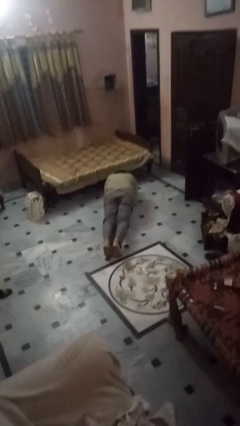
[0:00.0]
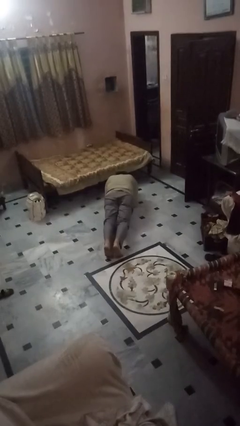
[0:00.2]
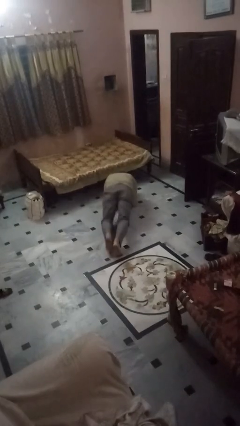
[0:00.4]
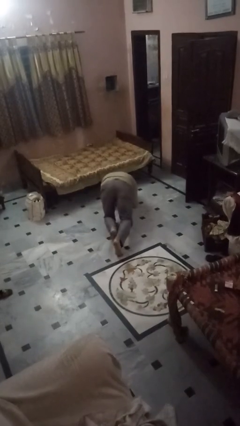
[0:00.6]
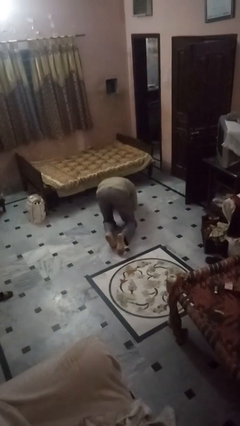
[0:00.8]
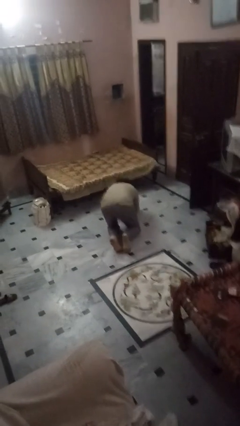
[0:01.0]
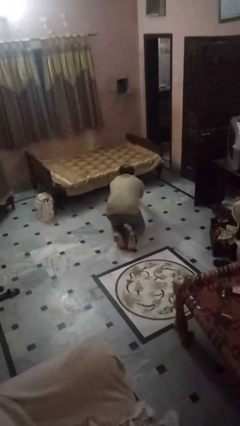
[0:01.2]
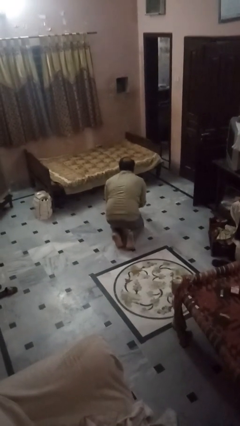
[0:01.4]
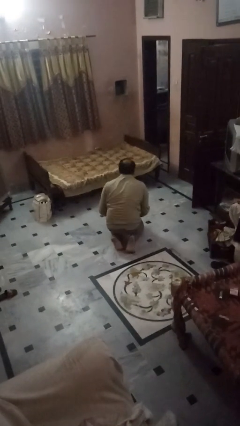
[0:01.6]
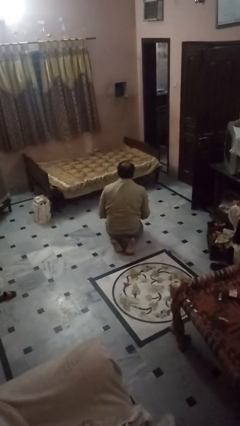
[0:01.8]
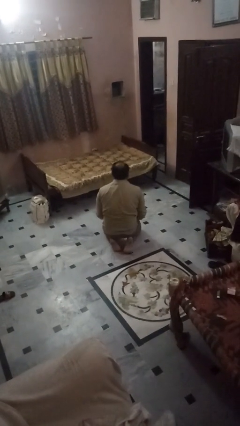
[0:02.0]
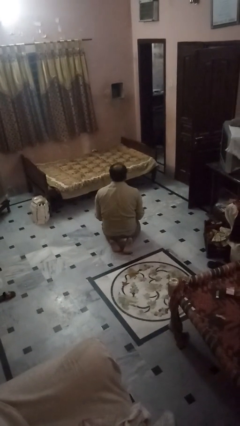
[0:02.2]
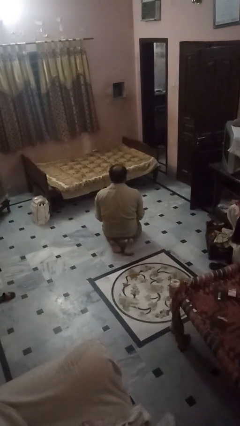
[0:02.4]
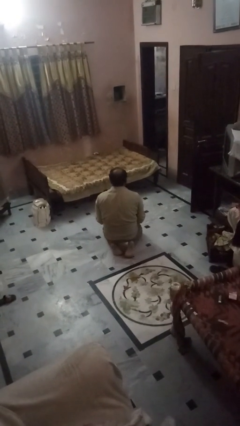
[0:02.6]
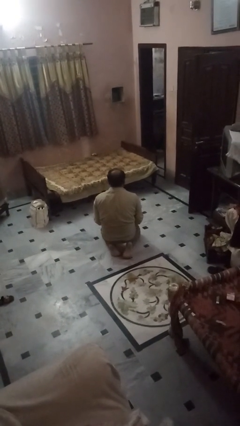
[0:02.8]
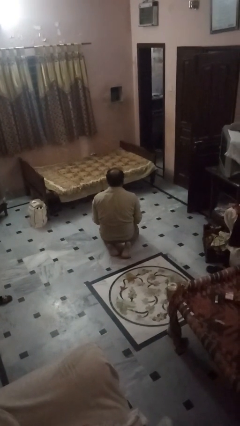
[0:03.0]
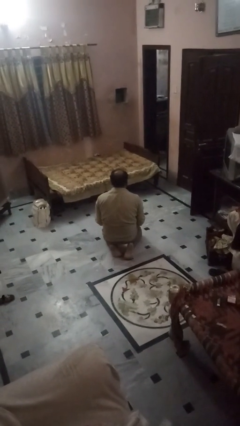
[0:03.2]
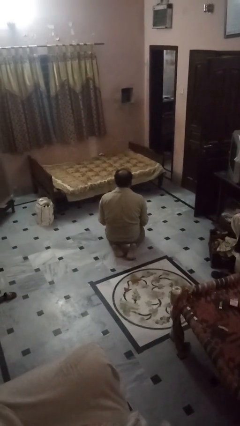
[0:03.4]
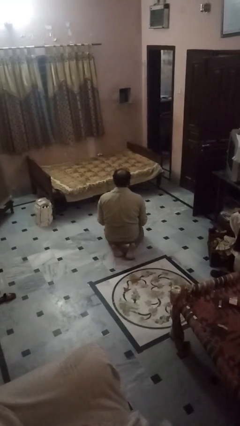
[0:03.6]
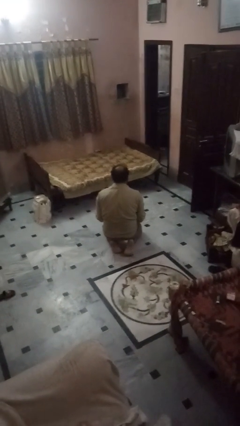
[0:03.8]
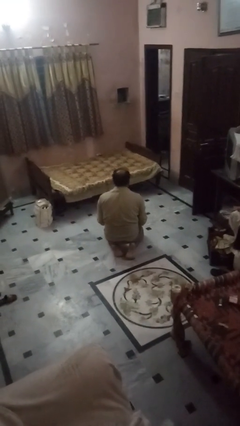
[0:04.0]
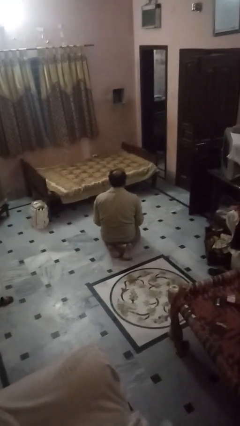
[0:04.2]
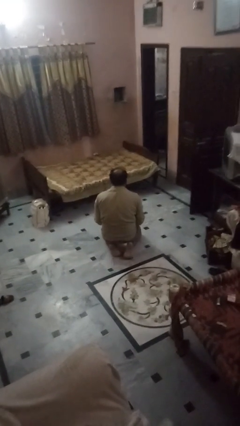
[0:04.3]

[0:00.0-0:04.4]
person stands up from floor

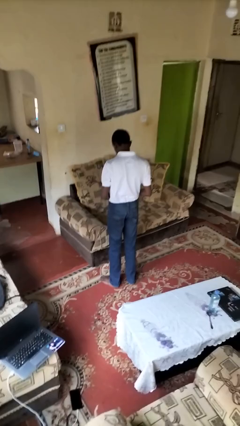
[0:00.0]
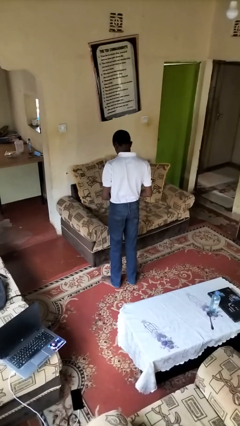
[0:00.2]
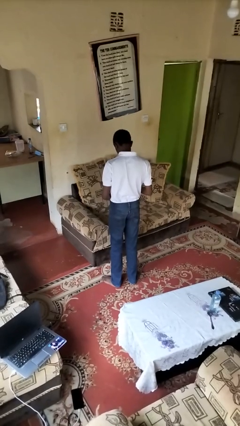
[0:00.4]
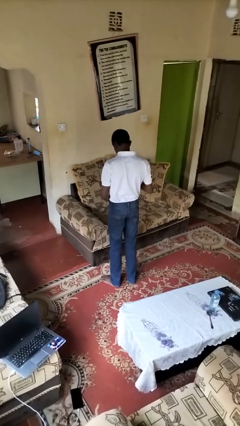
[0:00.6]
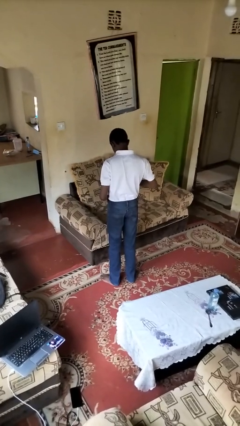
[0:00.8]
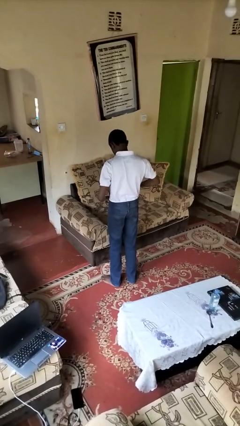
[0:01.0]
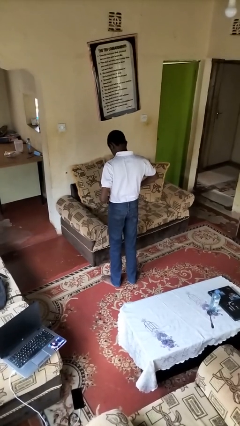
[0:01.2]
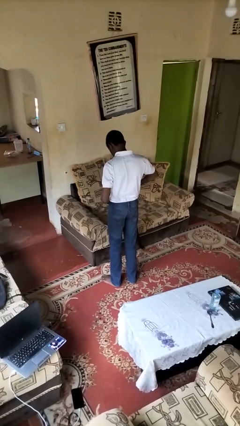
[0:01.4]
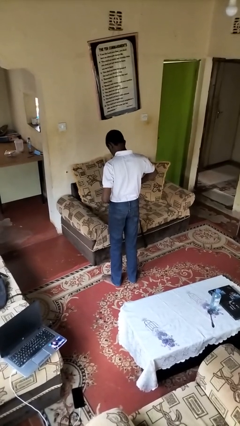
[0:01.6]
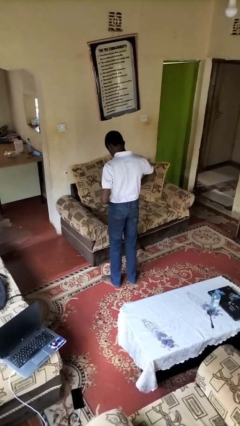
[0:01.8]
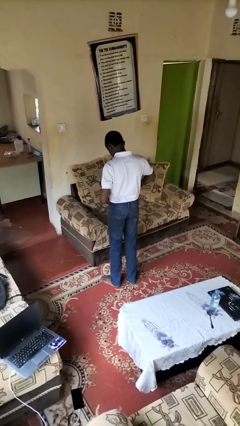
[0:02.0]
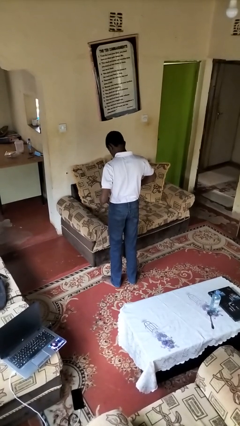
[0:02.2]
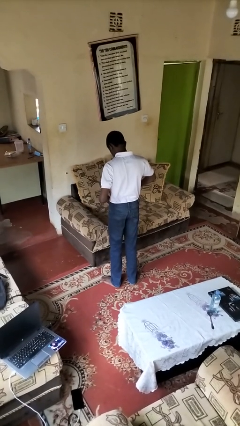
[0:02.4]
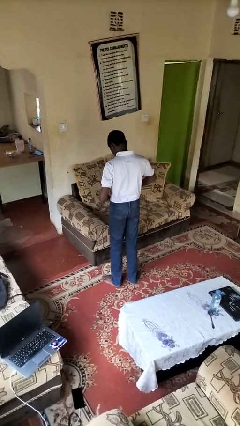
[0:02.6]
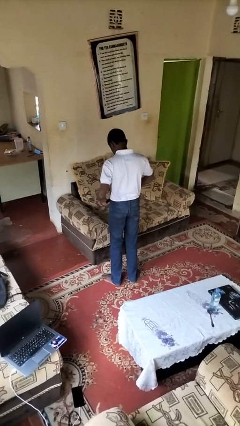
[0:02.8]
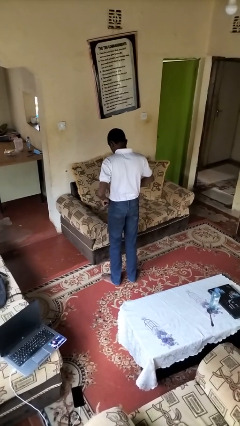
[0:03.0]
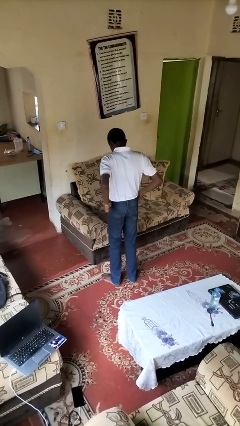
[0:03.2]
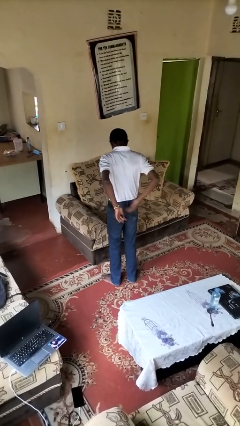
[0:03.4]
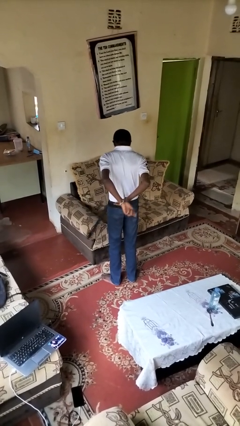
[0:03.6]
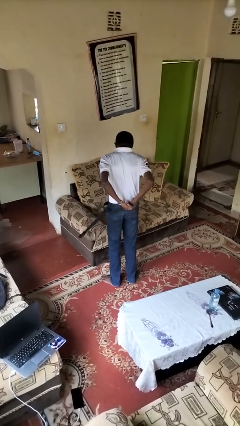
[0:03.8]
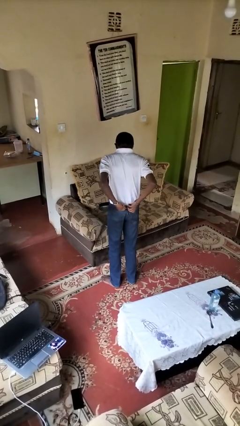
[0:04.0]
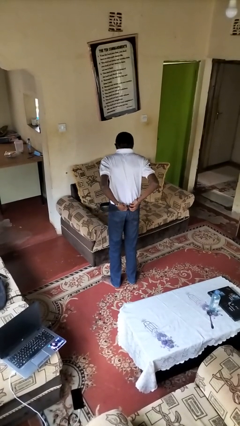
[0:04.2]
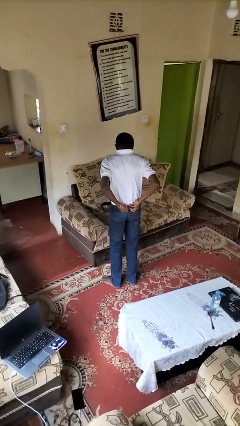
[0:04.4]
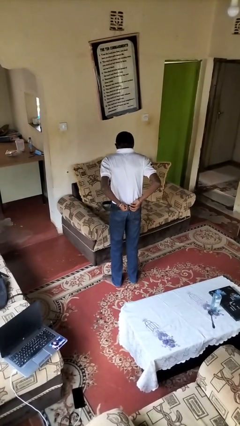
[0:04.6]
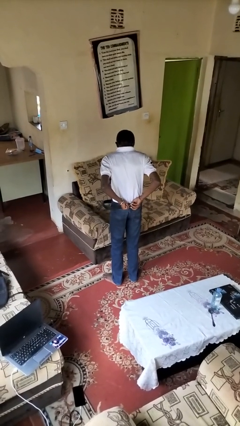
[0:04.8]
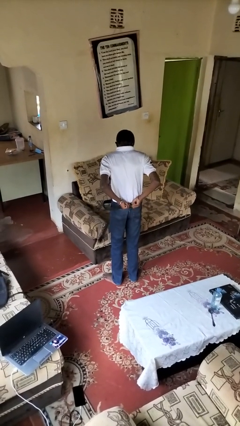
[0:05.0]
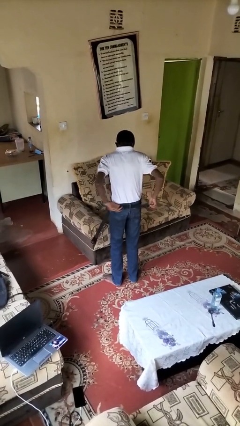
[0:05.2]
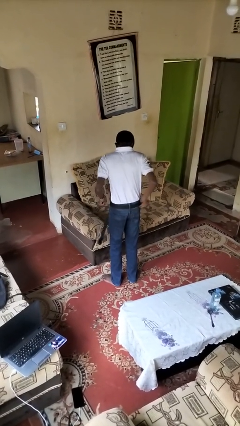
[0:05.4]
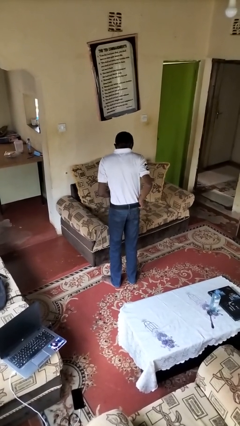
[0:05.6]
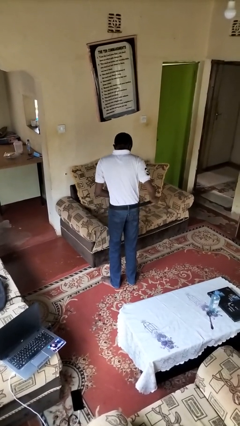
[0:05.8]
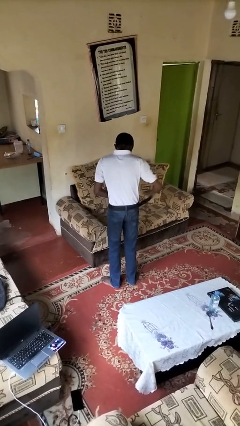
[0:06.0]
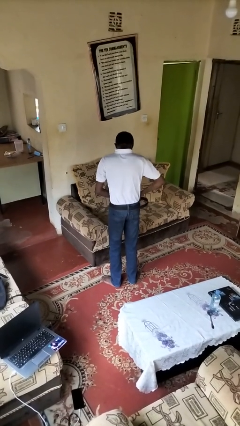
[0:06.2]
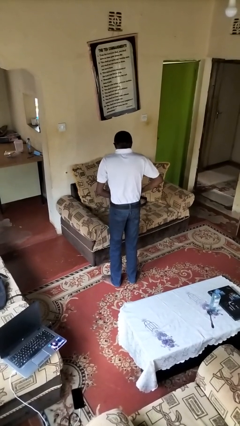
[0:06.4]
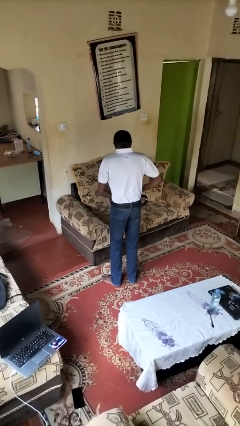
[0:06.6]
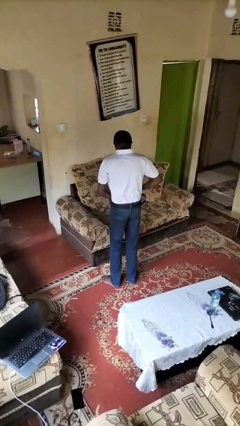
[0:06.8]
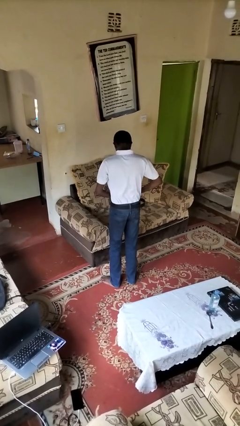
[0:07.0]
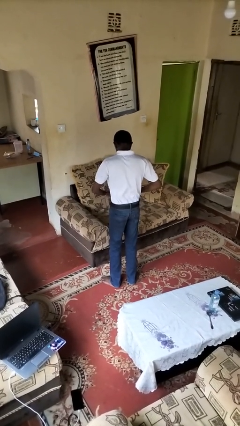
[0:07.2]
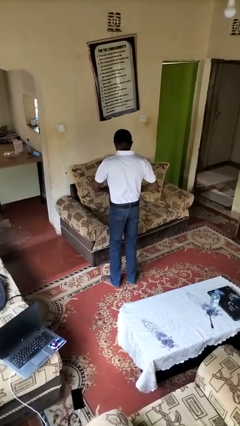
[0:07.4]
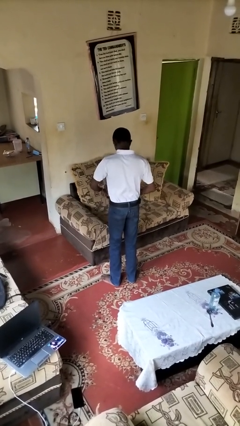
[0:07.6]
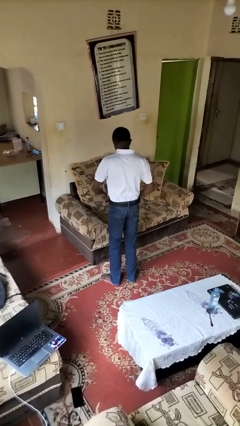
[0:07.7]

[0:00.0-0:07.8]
person puts on belt

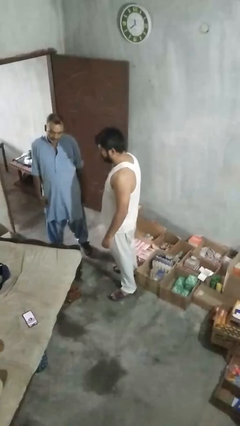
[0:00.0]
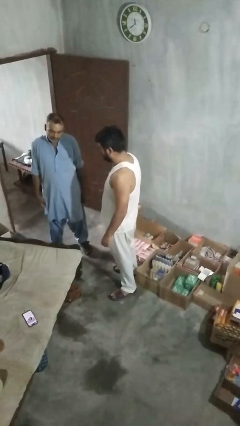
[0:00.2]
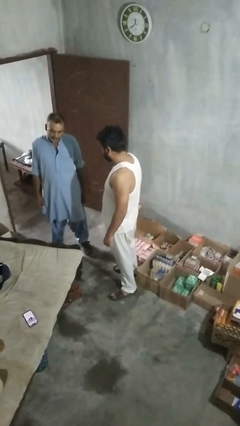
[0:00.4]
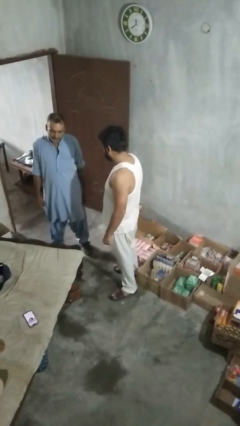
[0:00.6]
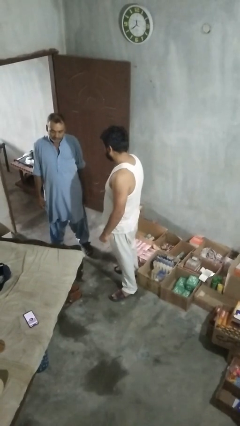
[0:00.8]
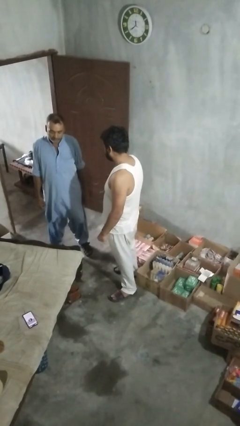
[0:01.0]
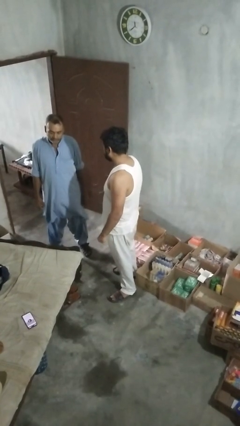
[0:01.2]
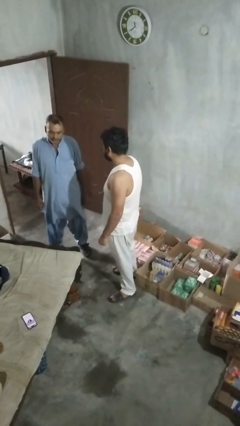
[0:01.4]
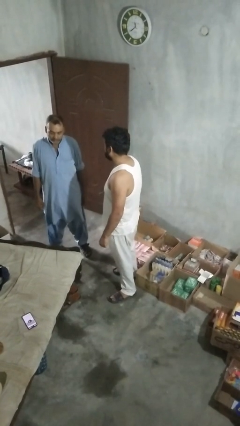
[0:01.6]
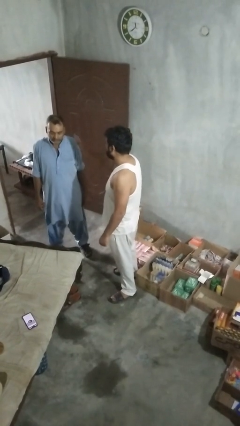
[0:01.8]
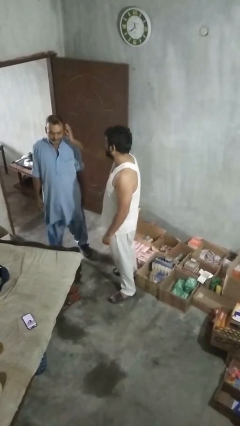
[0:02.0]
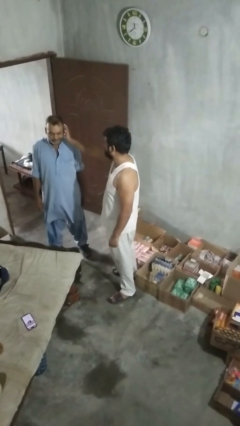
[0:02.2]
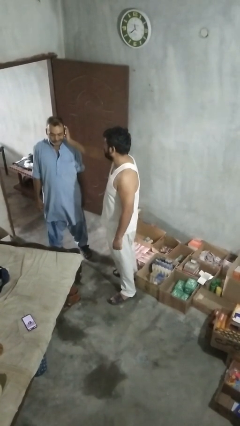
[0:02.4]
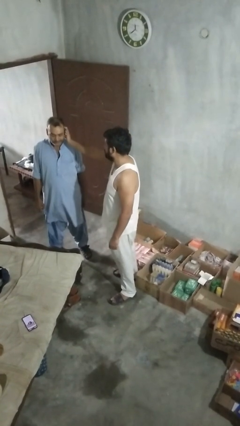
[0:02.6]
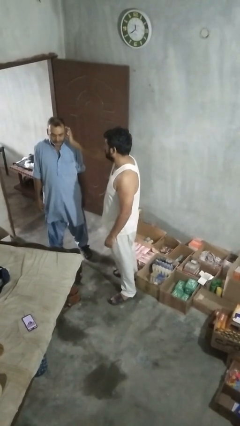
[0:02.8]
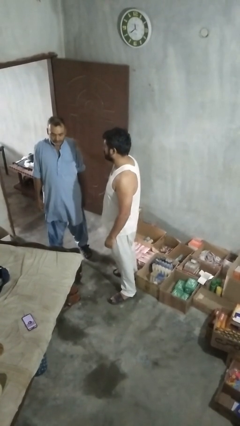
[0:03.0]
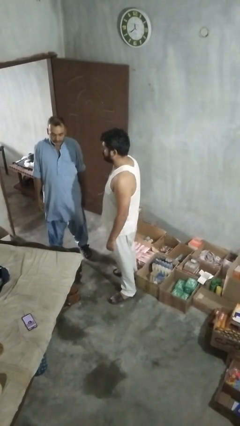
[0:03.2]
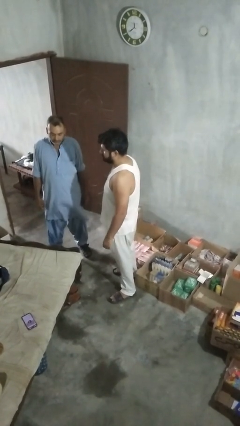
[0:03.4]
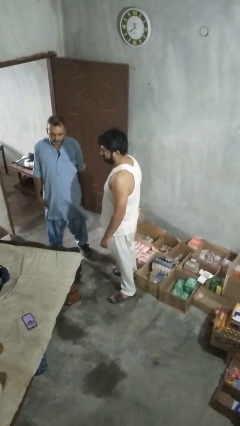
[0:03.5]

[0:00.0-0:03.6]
person touches face of person

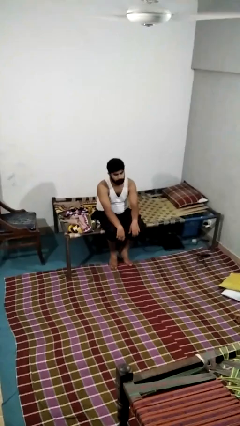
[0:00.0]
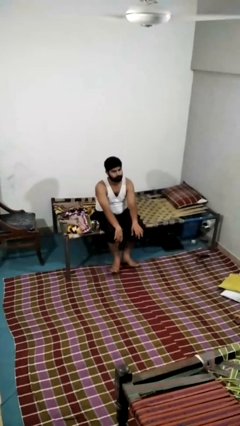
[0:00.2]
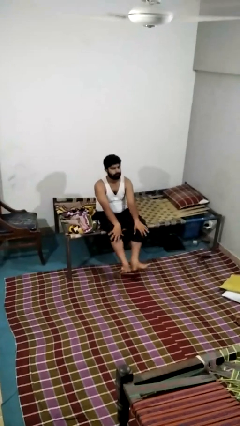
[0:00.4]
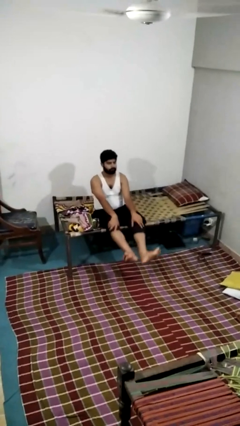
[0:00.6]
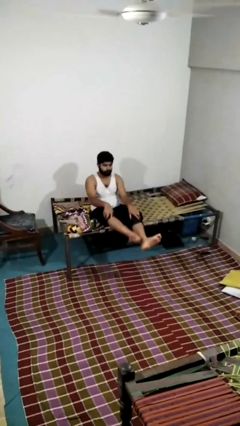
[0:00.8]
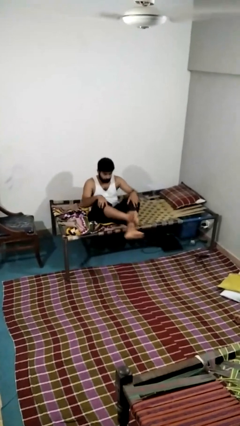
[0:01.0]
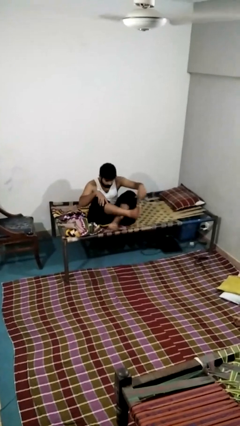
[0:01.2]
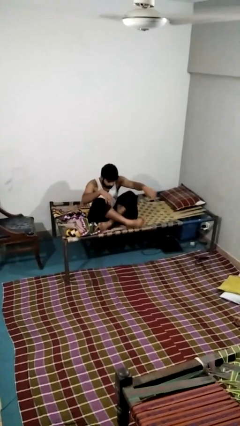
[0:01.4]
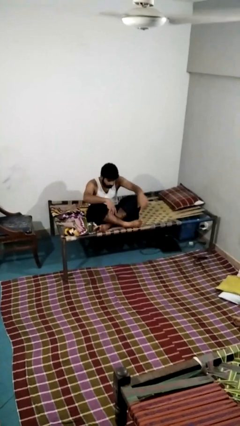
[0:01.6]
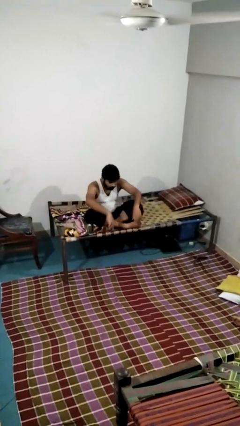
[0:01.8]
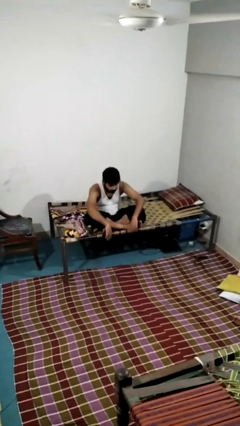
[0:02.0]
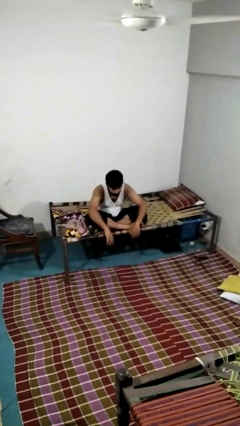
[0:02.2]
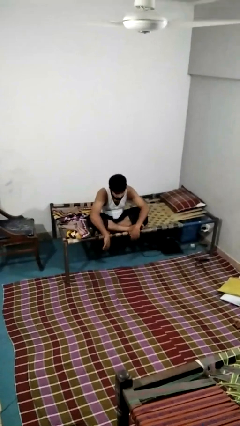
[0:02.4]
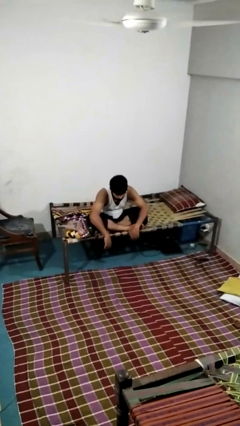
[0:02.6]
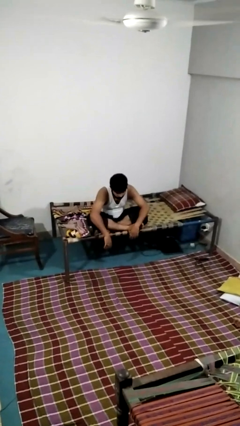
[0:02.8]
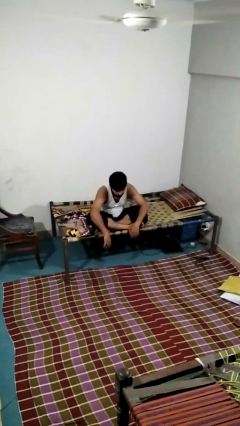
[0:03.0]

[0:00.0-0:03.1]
person crosses legs
